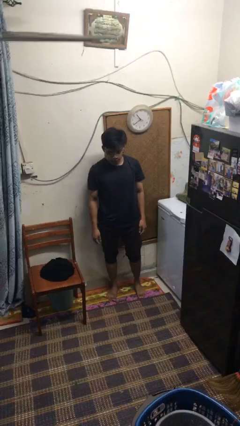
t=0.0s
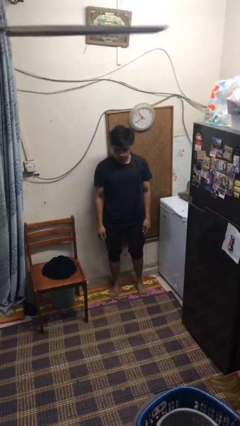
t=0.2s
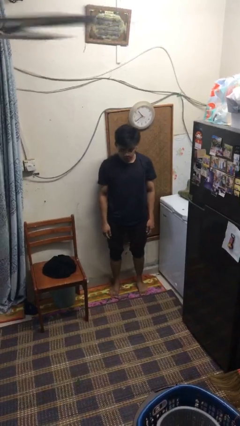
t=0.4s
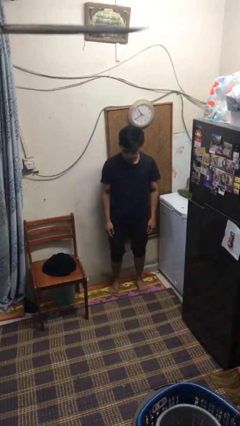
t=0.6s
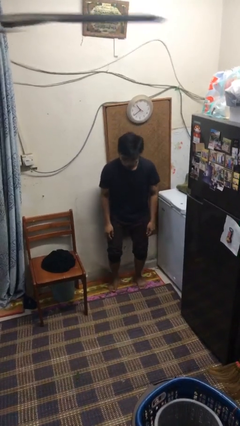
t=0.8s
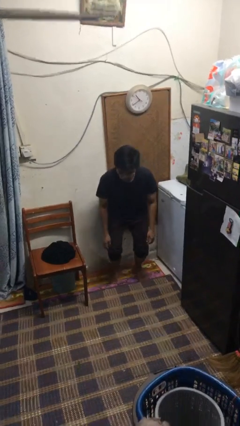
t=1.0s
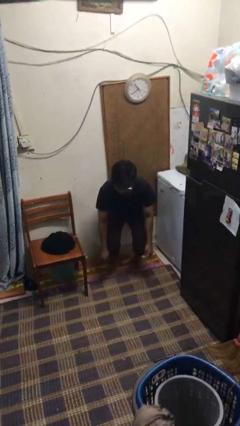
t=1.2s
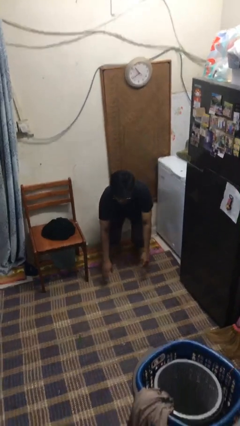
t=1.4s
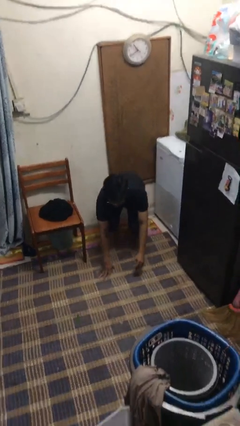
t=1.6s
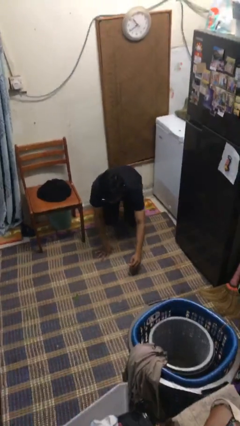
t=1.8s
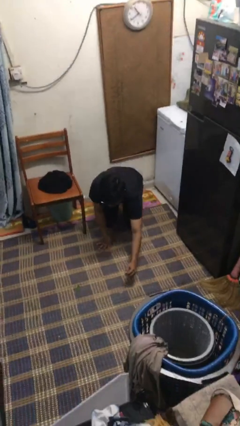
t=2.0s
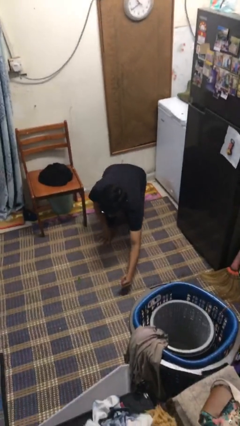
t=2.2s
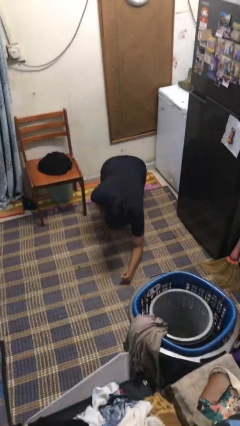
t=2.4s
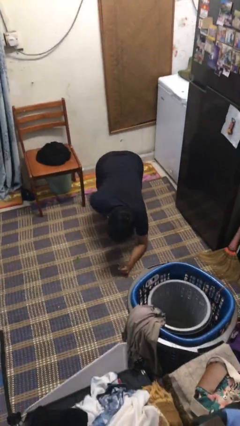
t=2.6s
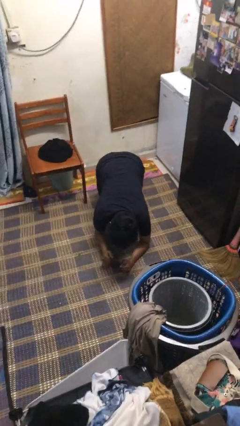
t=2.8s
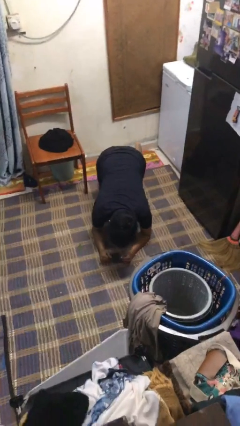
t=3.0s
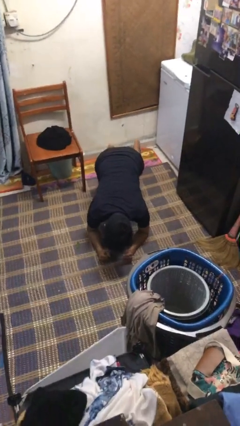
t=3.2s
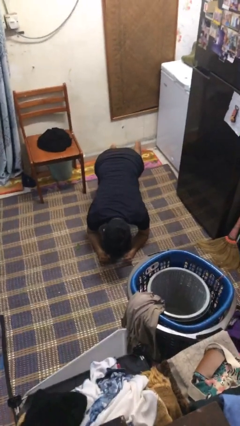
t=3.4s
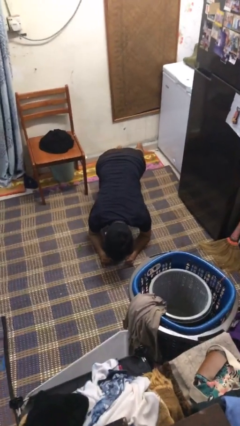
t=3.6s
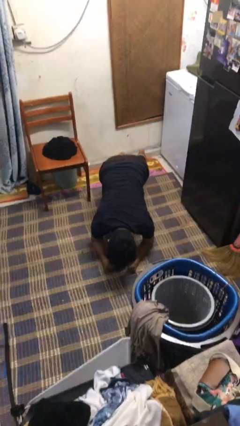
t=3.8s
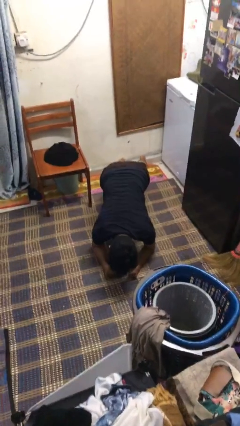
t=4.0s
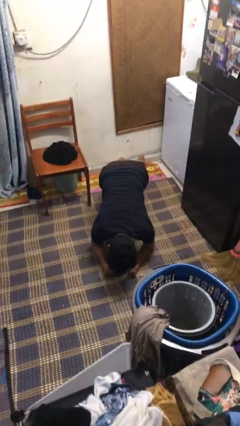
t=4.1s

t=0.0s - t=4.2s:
person exercises with plank

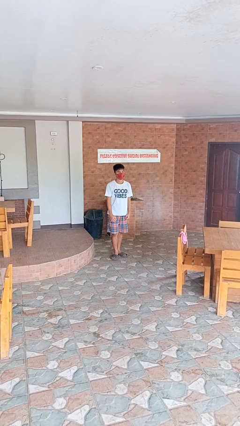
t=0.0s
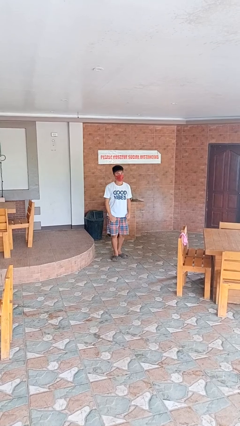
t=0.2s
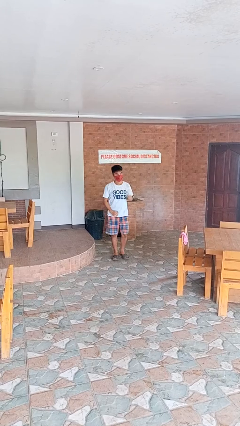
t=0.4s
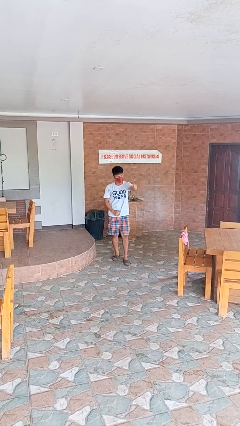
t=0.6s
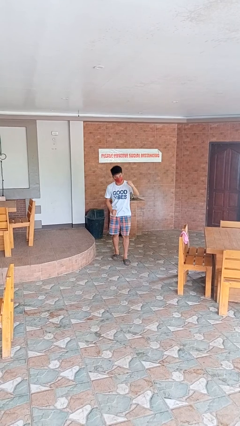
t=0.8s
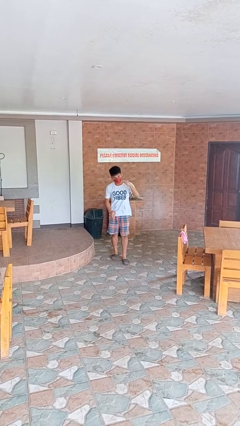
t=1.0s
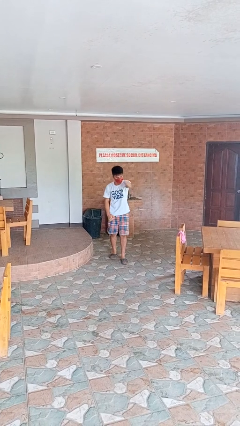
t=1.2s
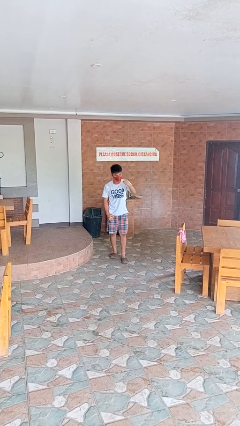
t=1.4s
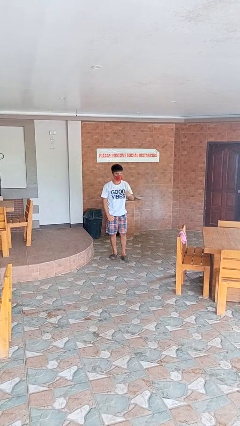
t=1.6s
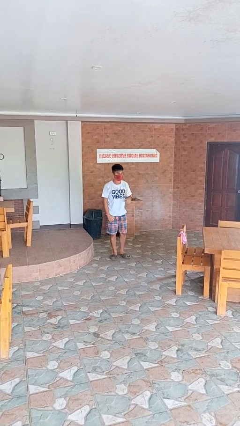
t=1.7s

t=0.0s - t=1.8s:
person punches

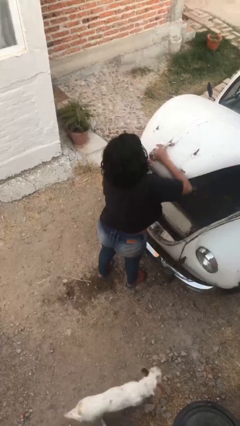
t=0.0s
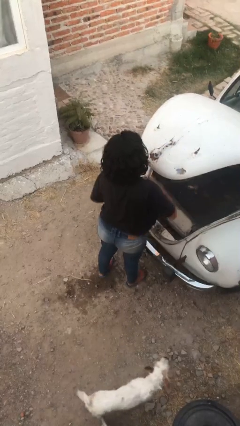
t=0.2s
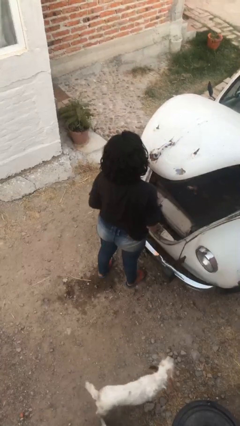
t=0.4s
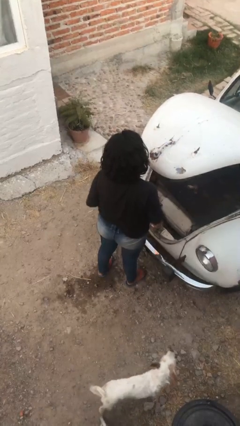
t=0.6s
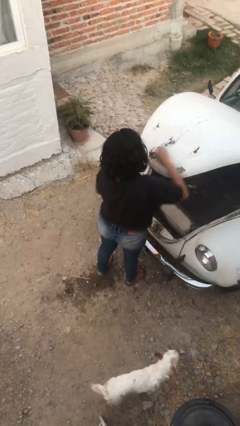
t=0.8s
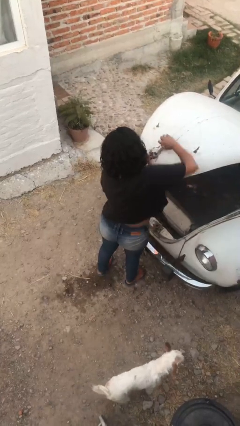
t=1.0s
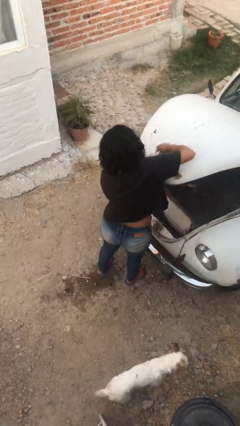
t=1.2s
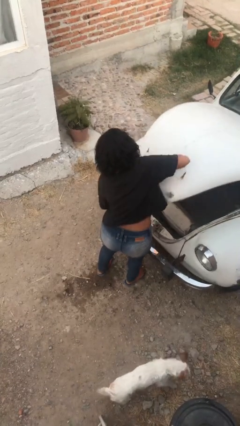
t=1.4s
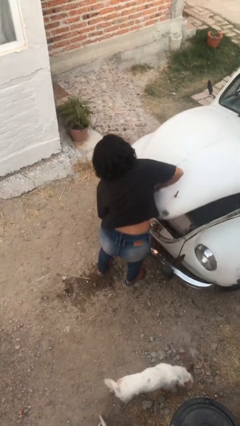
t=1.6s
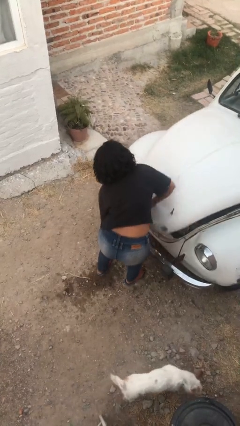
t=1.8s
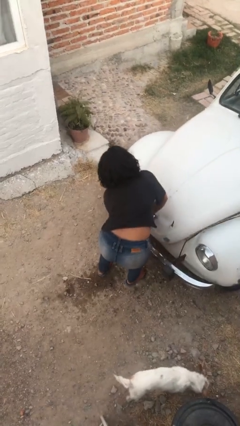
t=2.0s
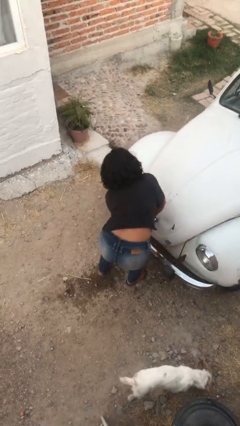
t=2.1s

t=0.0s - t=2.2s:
person closes car trunk

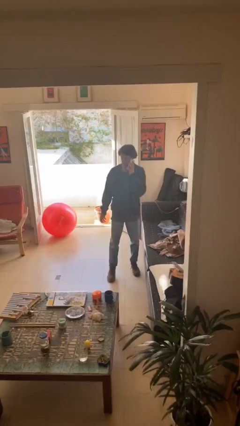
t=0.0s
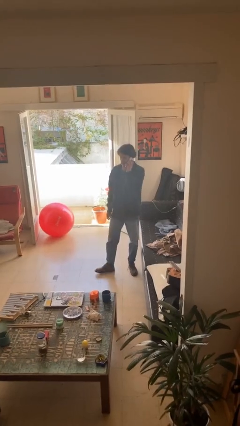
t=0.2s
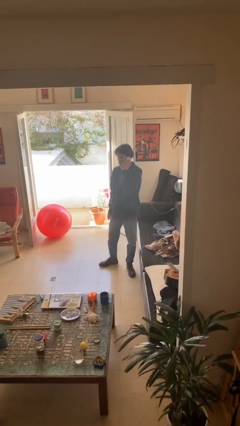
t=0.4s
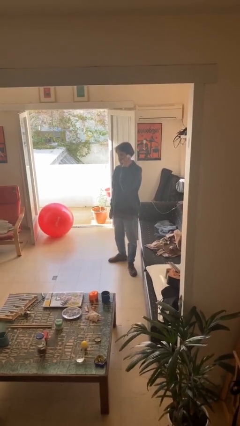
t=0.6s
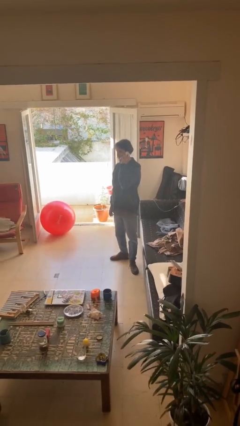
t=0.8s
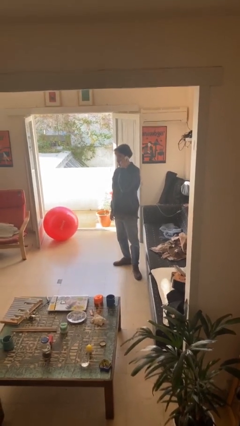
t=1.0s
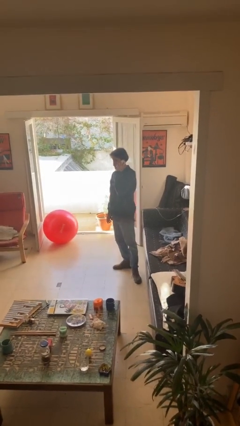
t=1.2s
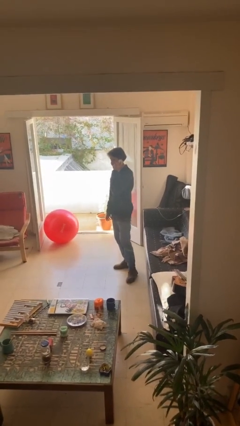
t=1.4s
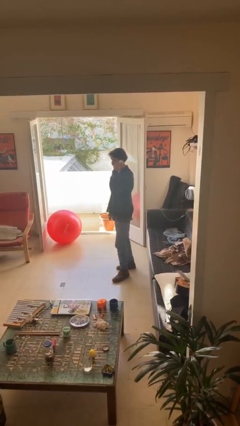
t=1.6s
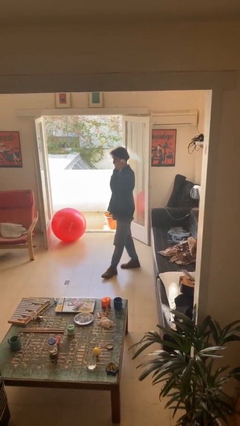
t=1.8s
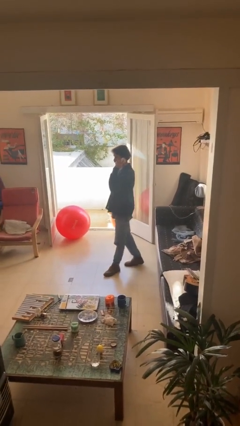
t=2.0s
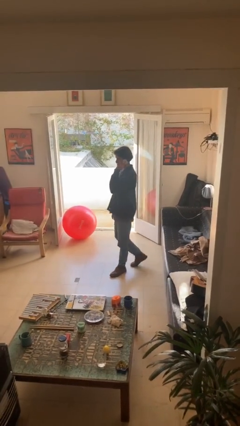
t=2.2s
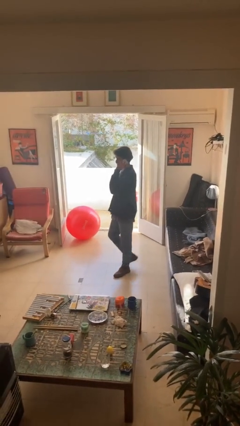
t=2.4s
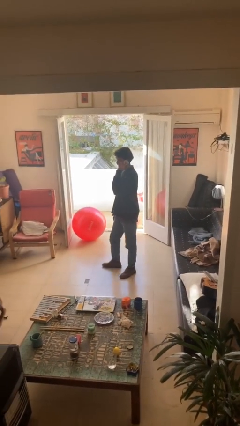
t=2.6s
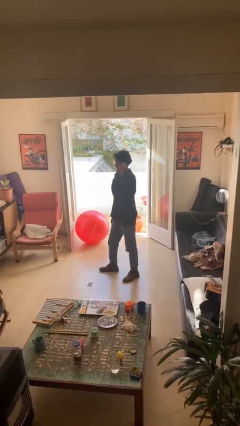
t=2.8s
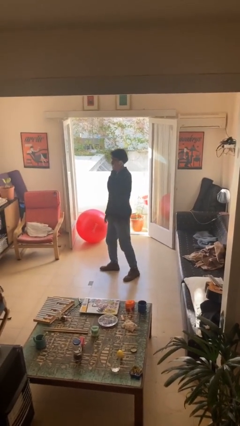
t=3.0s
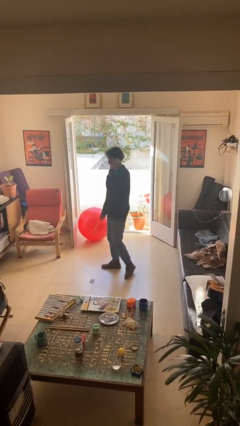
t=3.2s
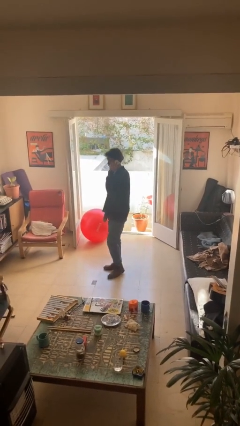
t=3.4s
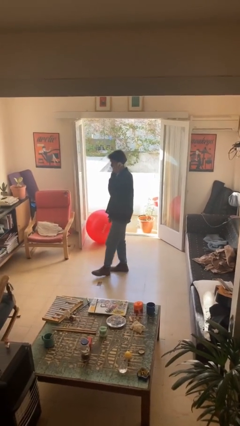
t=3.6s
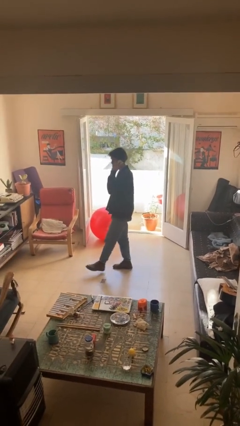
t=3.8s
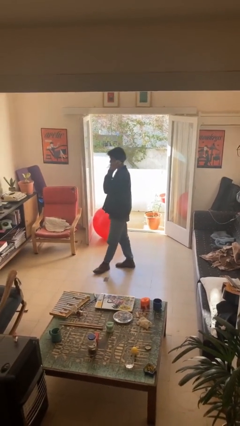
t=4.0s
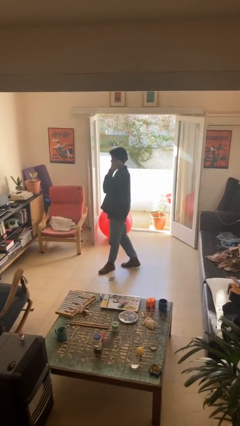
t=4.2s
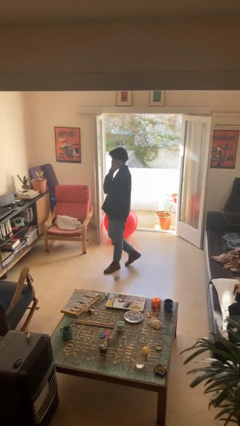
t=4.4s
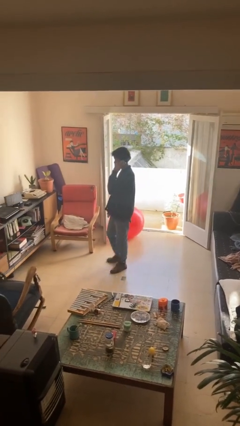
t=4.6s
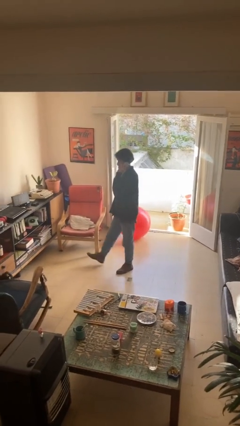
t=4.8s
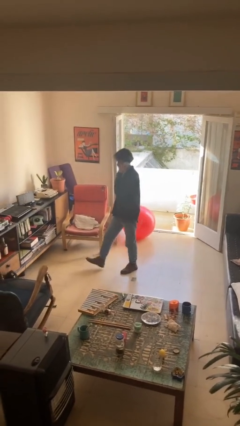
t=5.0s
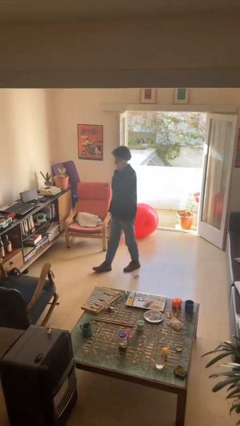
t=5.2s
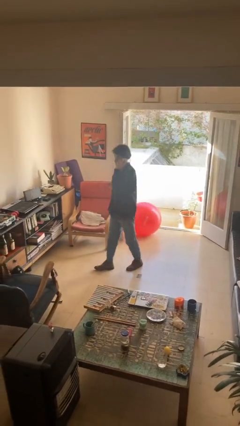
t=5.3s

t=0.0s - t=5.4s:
person talks on phone

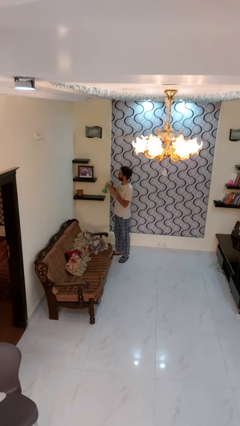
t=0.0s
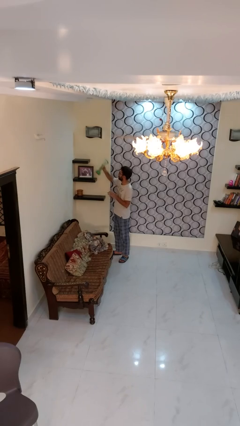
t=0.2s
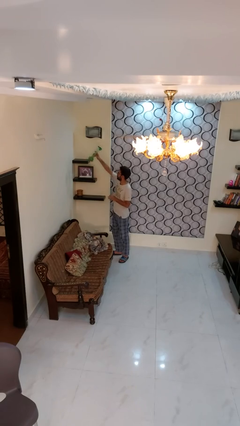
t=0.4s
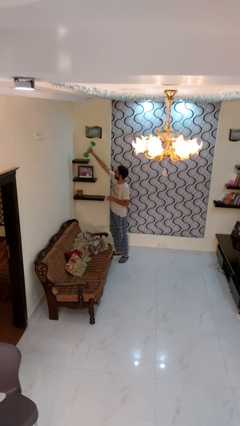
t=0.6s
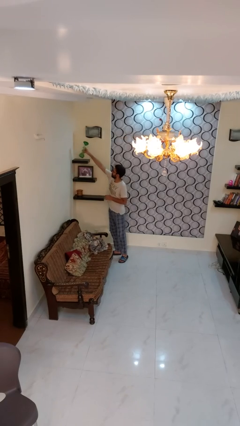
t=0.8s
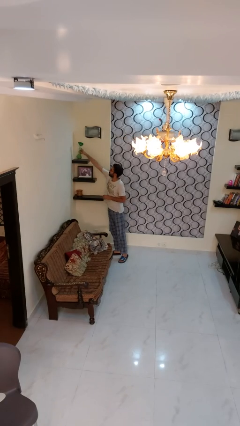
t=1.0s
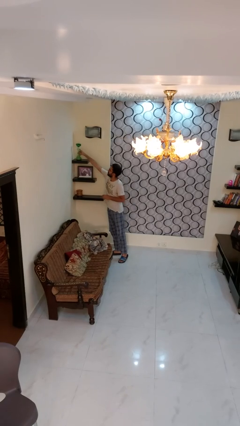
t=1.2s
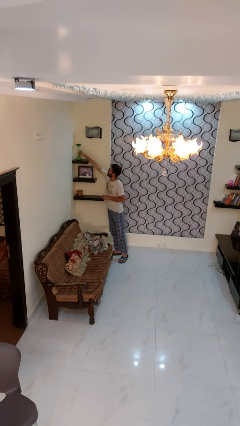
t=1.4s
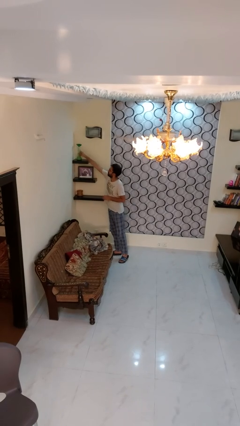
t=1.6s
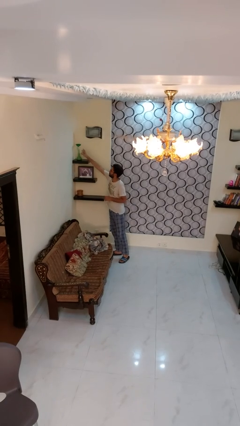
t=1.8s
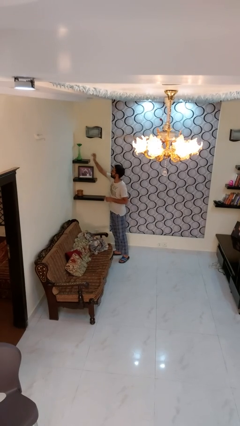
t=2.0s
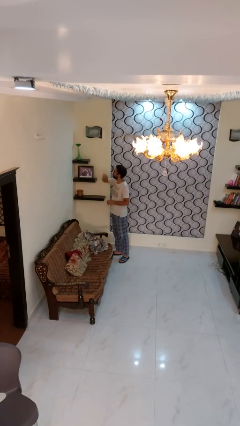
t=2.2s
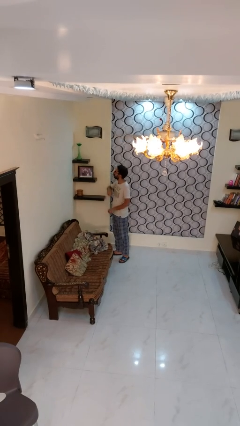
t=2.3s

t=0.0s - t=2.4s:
person puts down object on shelf

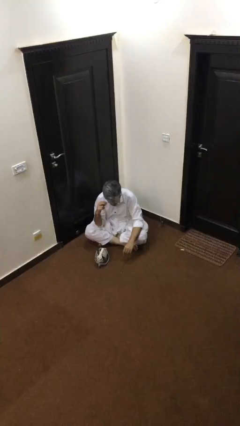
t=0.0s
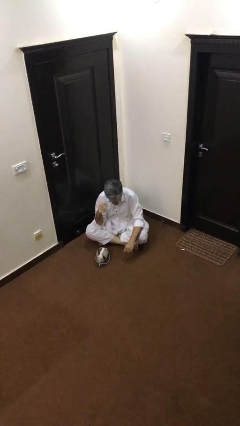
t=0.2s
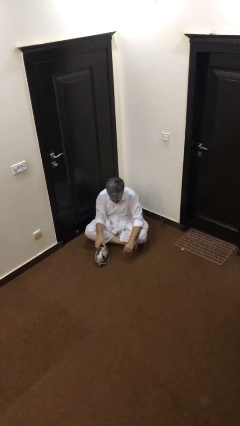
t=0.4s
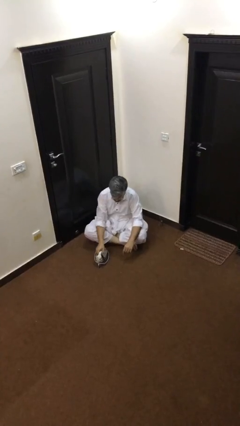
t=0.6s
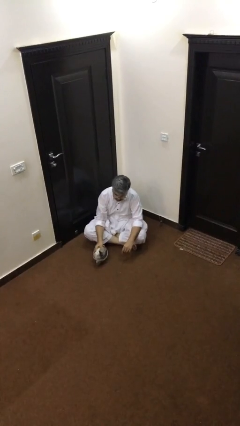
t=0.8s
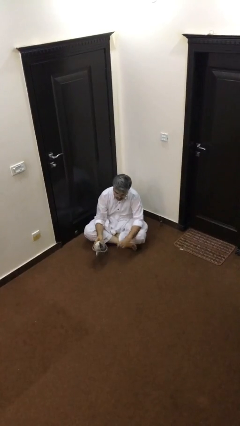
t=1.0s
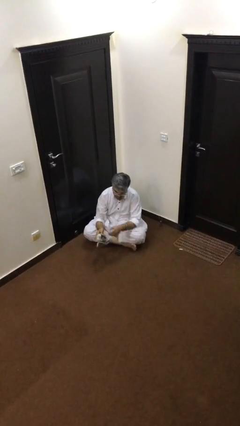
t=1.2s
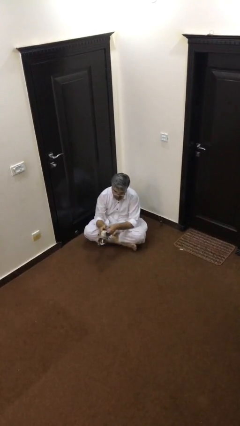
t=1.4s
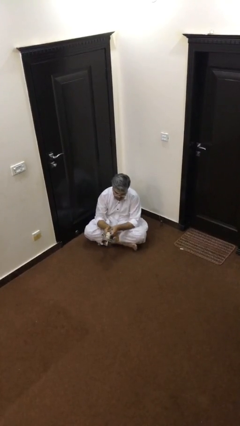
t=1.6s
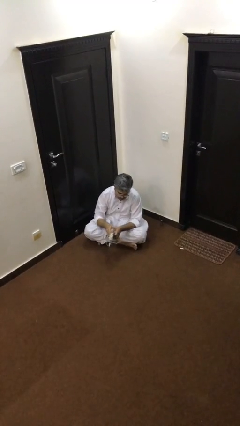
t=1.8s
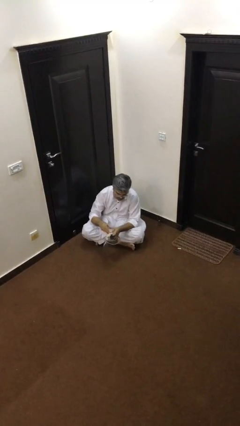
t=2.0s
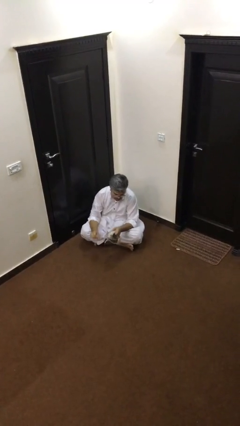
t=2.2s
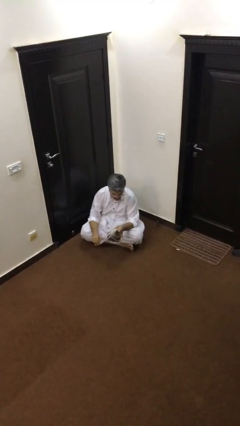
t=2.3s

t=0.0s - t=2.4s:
person picks up object from floor
